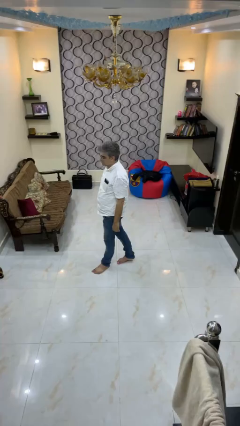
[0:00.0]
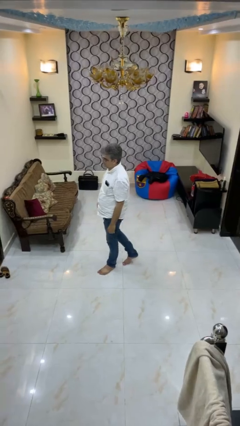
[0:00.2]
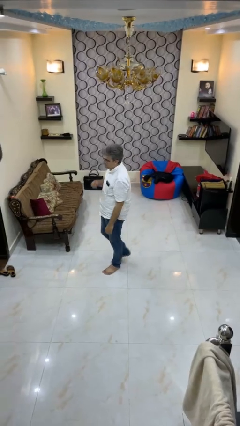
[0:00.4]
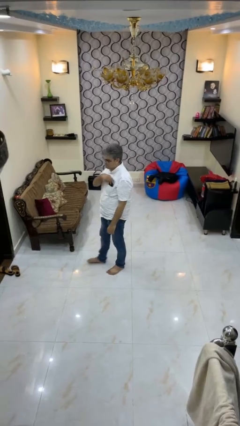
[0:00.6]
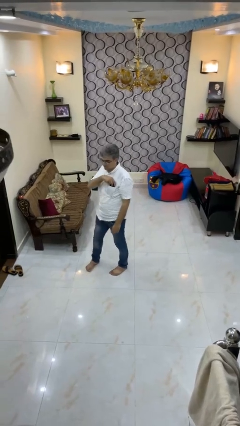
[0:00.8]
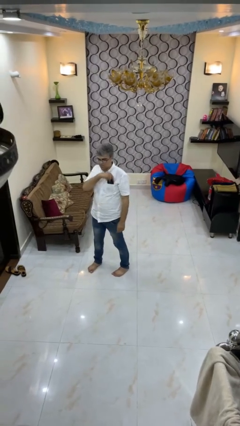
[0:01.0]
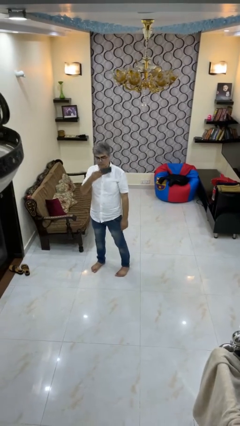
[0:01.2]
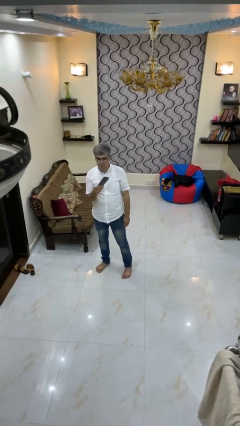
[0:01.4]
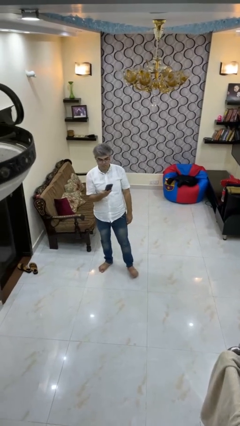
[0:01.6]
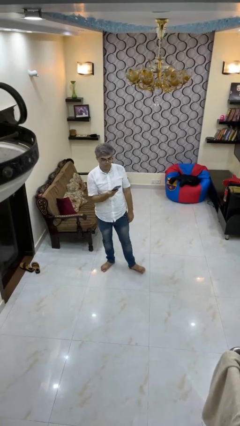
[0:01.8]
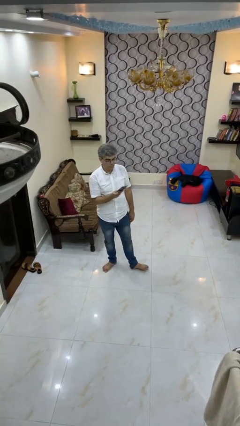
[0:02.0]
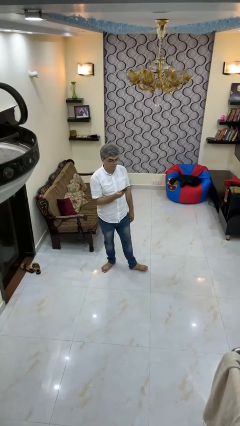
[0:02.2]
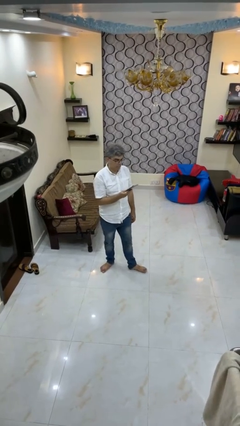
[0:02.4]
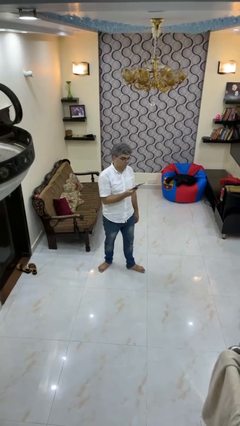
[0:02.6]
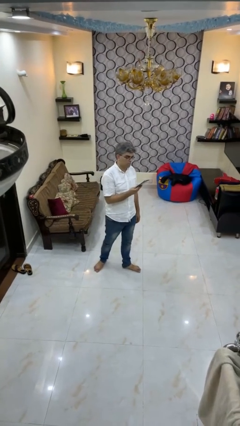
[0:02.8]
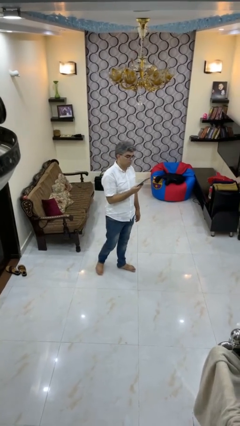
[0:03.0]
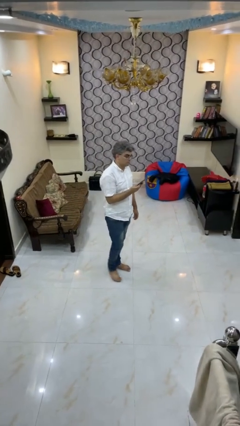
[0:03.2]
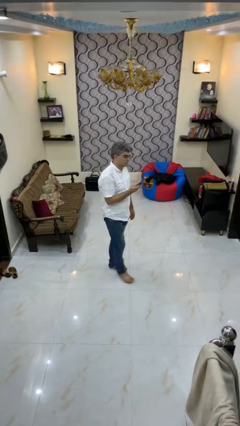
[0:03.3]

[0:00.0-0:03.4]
person takes phone from pocket

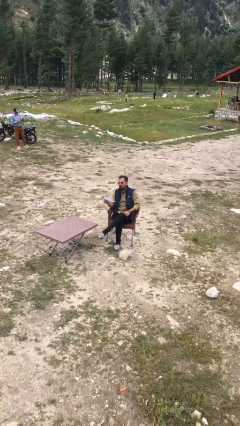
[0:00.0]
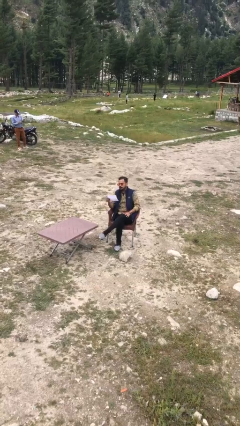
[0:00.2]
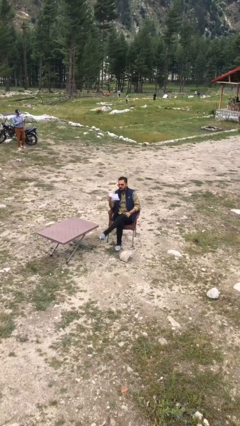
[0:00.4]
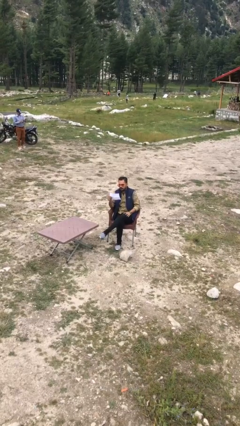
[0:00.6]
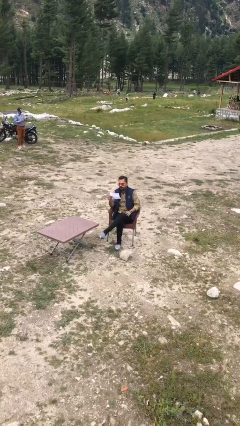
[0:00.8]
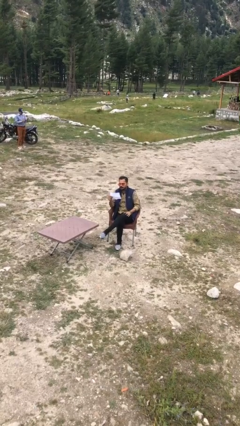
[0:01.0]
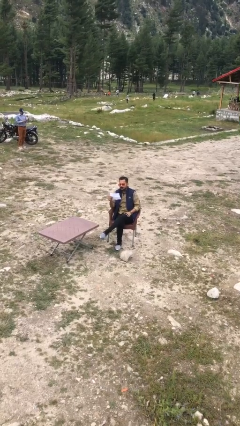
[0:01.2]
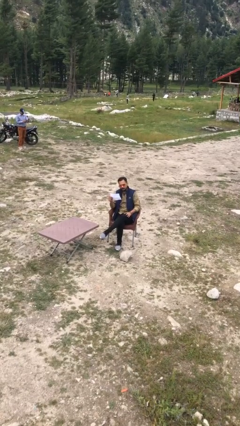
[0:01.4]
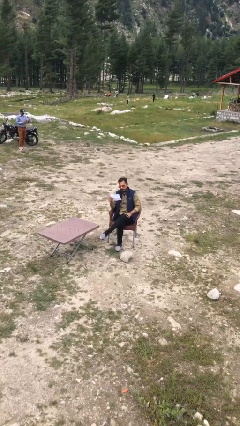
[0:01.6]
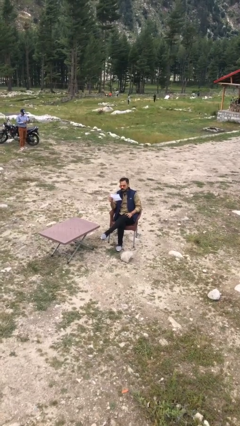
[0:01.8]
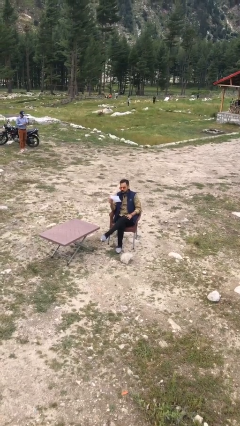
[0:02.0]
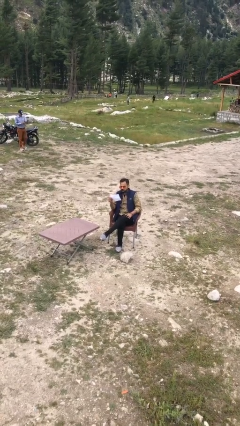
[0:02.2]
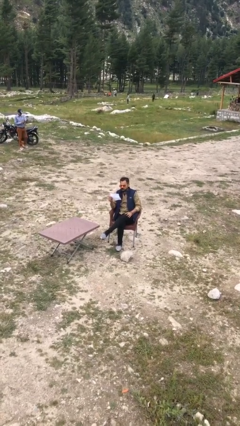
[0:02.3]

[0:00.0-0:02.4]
person reads document

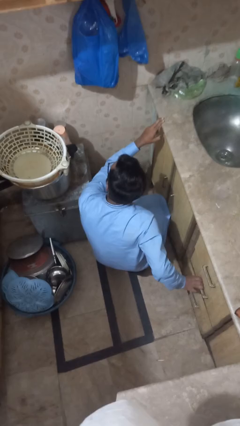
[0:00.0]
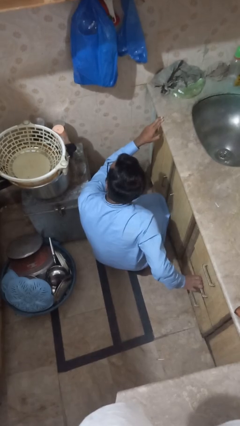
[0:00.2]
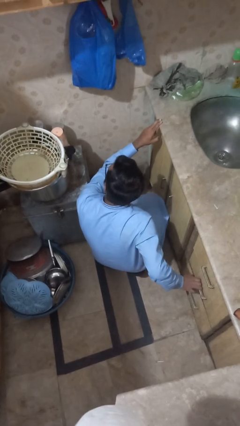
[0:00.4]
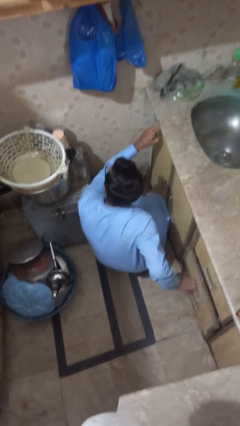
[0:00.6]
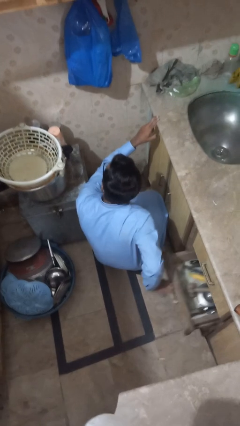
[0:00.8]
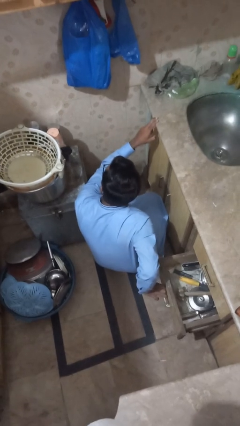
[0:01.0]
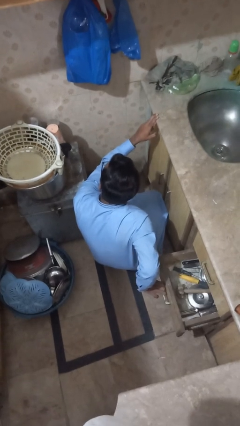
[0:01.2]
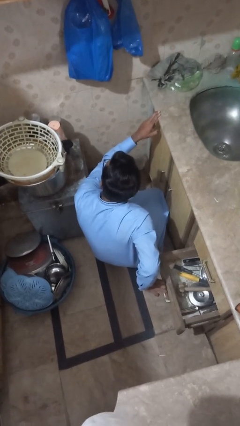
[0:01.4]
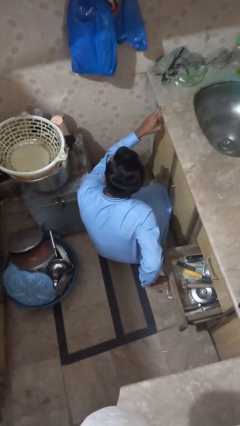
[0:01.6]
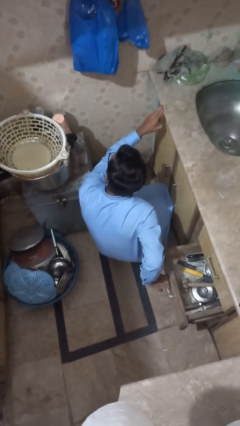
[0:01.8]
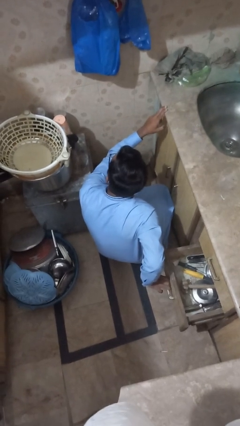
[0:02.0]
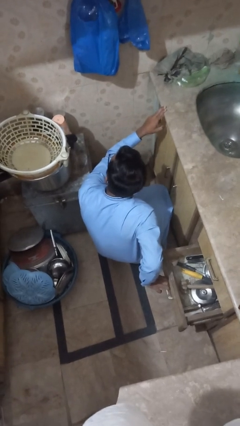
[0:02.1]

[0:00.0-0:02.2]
person opens kitchen drawer

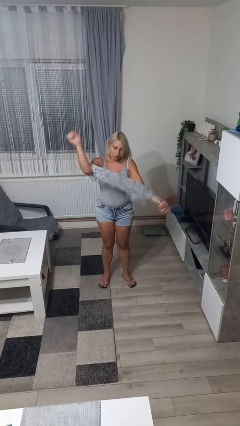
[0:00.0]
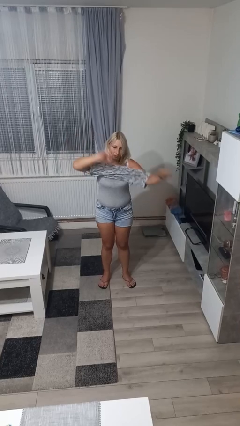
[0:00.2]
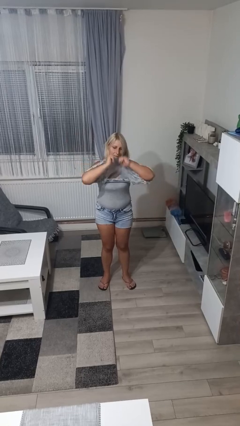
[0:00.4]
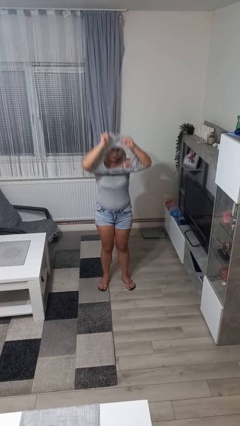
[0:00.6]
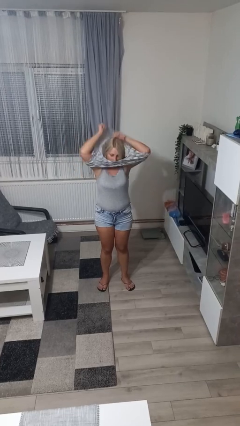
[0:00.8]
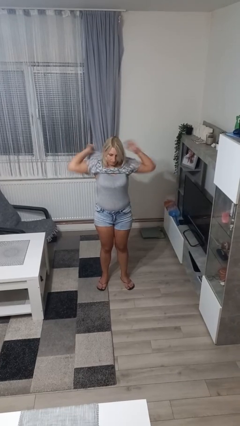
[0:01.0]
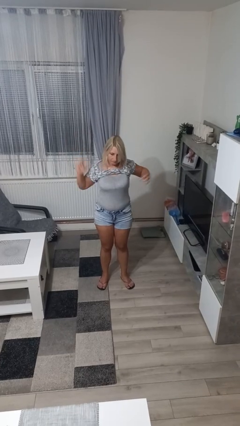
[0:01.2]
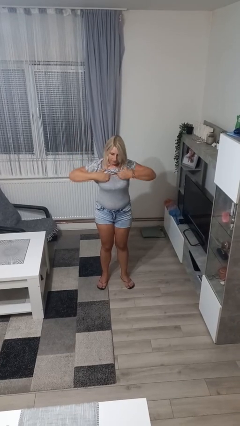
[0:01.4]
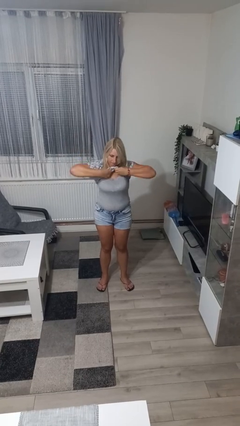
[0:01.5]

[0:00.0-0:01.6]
person puts on shirt

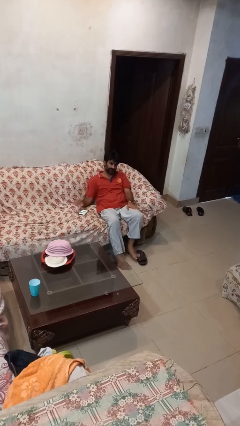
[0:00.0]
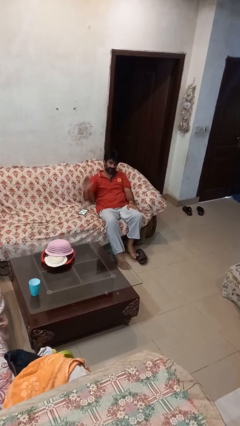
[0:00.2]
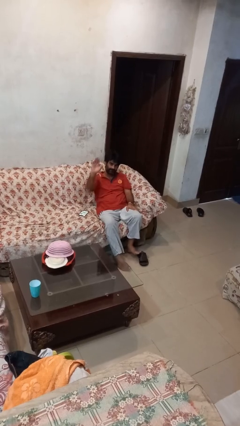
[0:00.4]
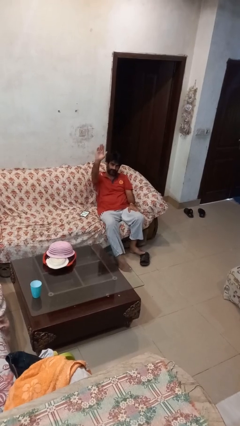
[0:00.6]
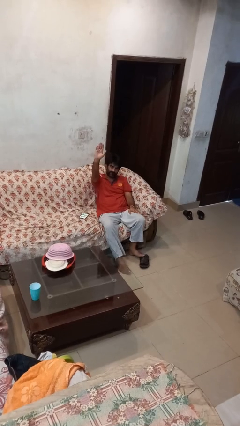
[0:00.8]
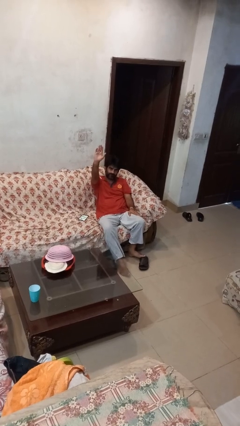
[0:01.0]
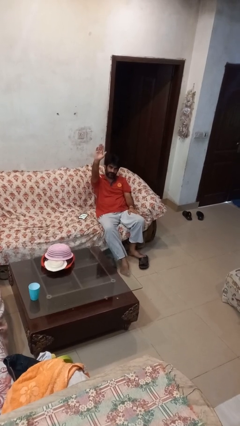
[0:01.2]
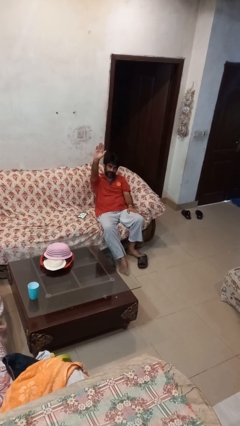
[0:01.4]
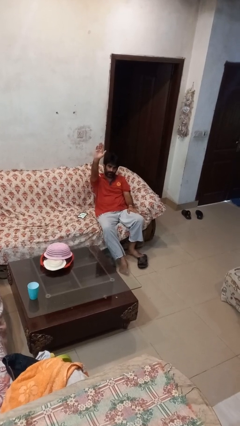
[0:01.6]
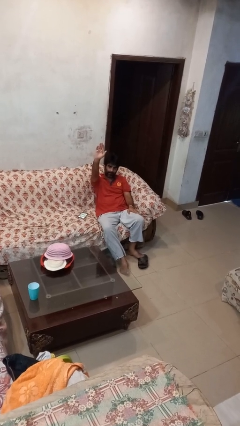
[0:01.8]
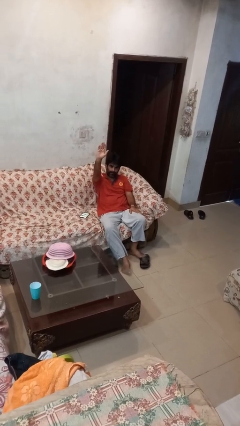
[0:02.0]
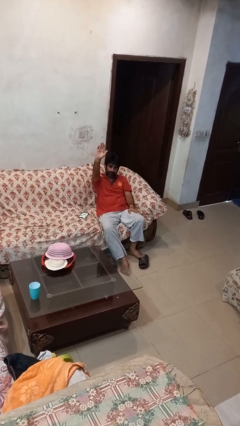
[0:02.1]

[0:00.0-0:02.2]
person gestures raise hand

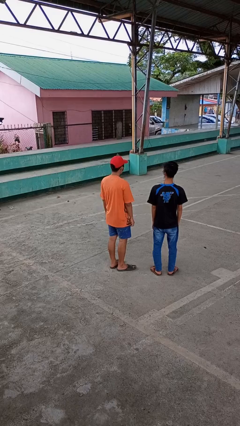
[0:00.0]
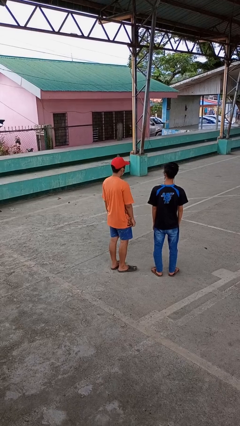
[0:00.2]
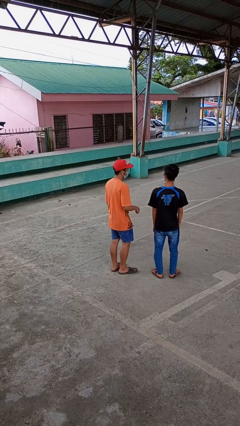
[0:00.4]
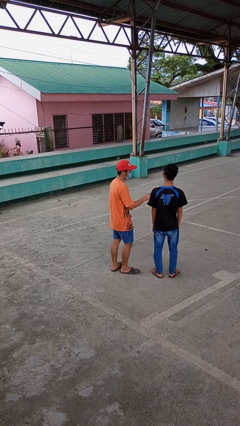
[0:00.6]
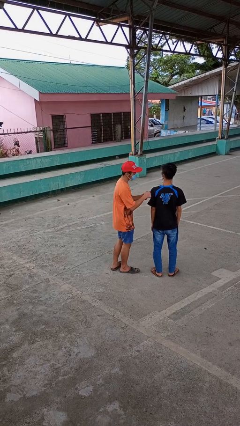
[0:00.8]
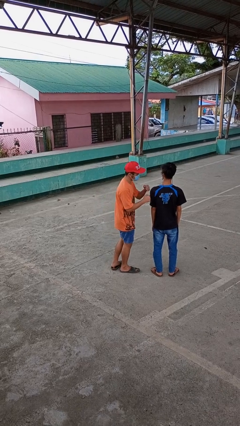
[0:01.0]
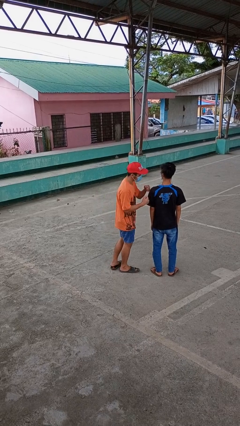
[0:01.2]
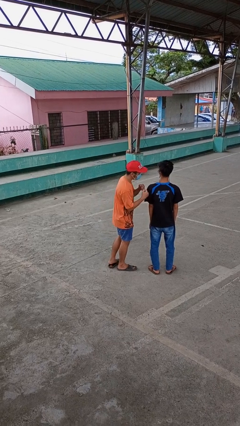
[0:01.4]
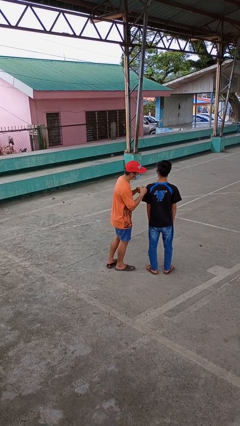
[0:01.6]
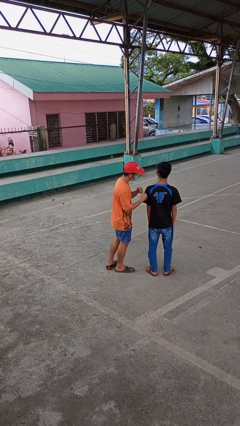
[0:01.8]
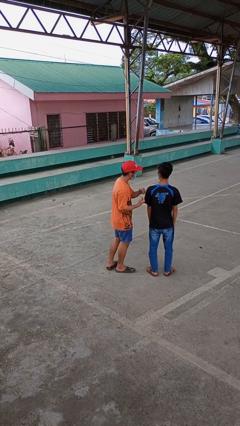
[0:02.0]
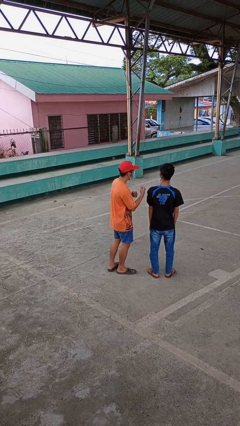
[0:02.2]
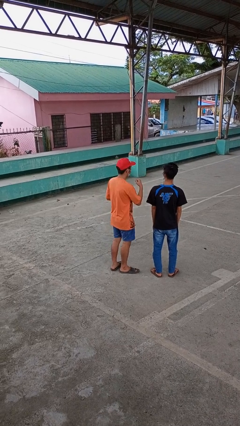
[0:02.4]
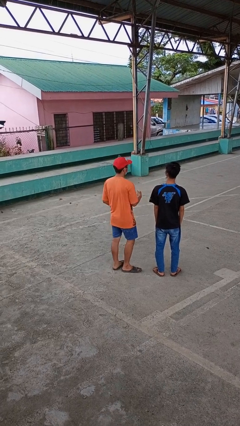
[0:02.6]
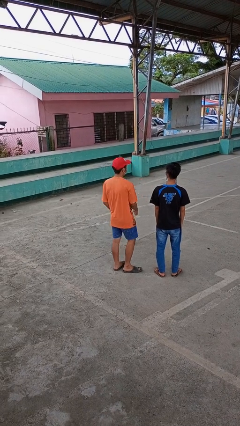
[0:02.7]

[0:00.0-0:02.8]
person pounds shoulders of person

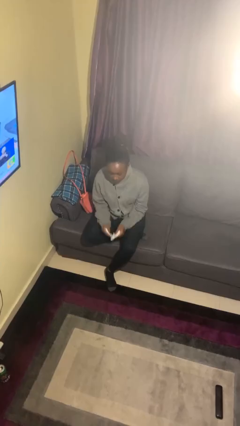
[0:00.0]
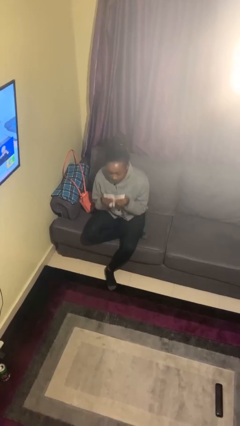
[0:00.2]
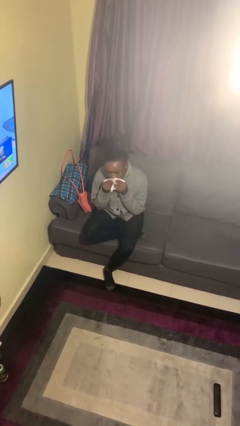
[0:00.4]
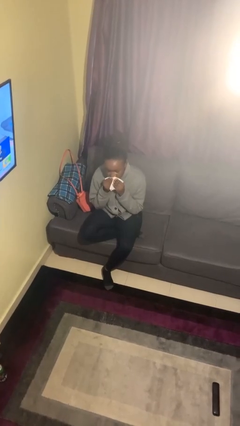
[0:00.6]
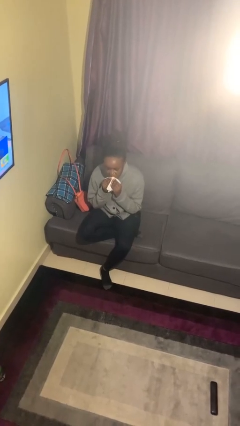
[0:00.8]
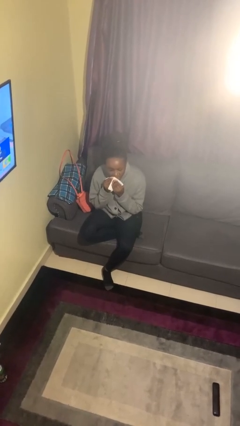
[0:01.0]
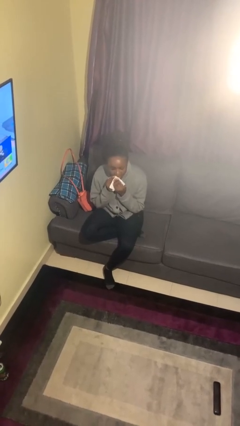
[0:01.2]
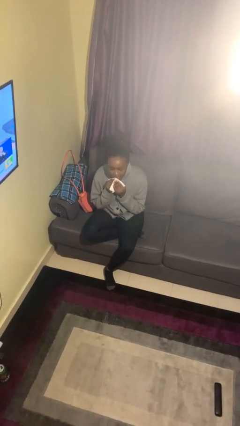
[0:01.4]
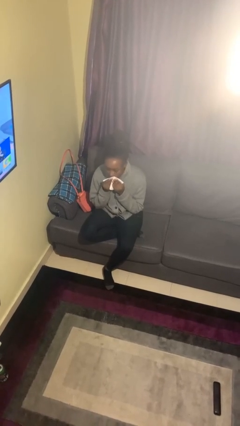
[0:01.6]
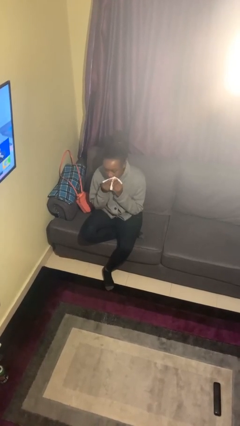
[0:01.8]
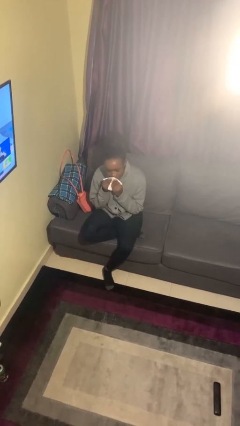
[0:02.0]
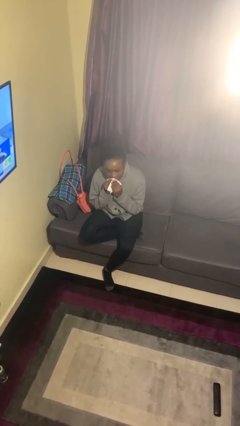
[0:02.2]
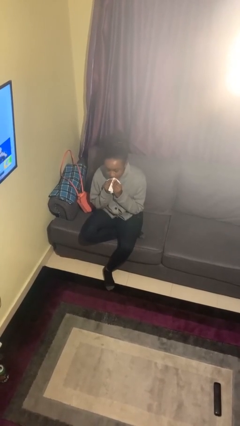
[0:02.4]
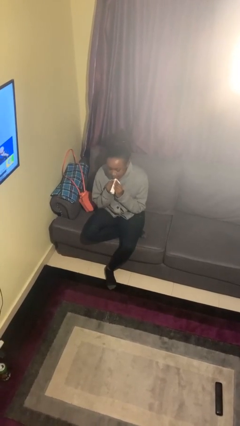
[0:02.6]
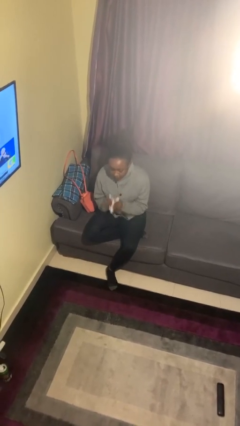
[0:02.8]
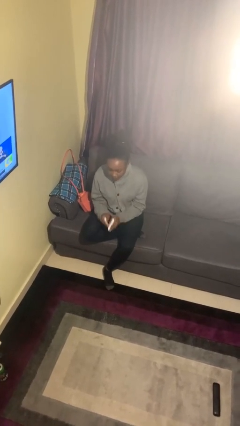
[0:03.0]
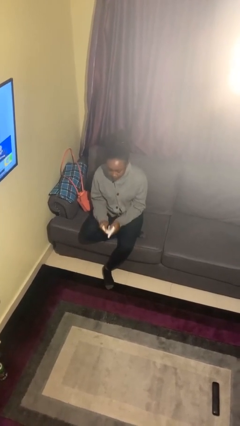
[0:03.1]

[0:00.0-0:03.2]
person wipes mouth with napkin
